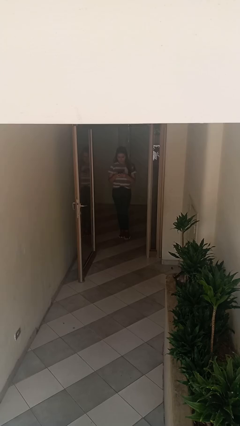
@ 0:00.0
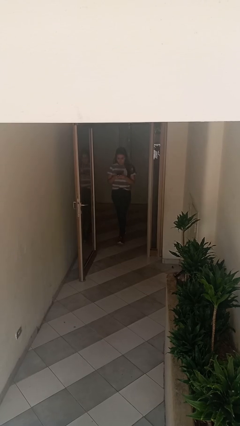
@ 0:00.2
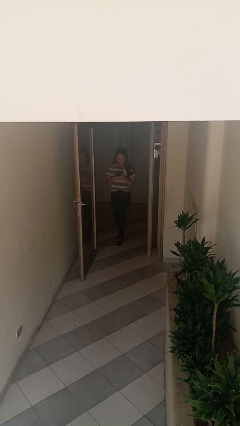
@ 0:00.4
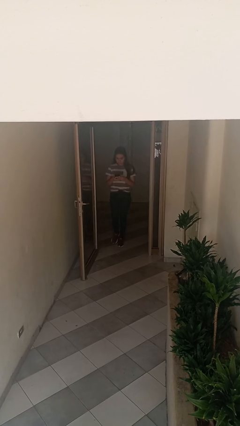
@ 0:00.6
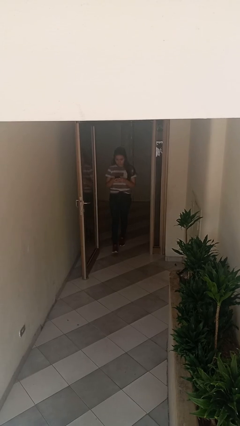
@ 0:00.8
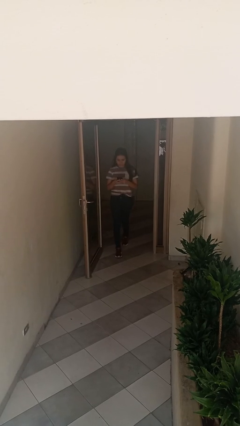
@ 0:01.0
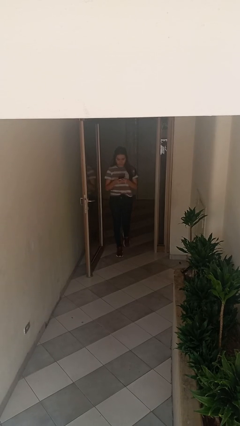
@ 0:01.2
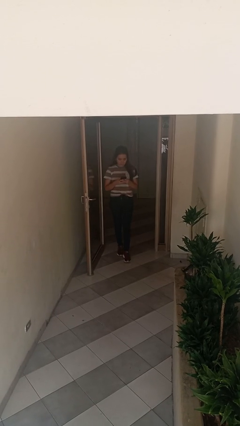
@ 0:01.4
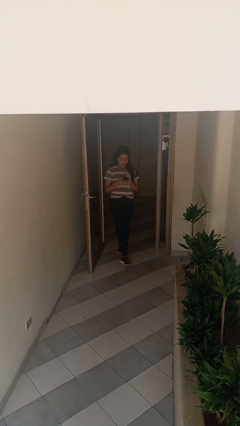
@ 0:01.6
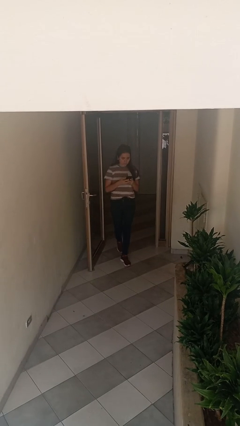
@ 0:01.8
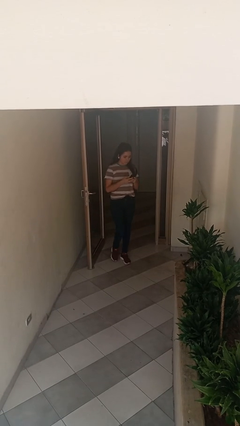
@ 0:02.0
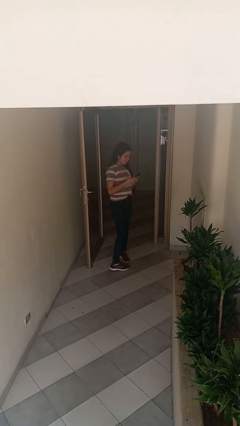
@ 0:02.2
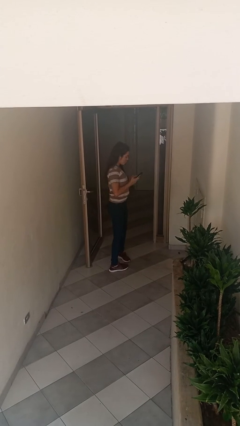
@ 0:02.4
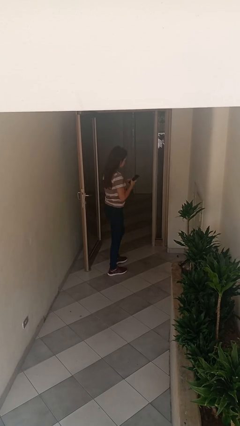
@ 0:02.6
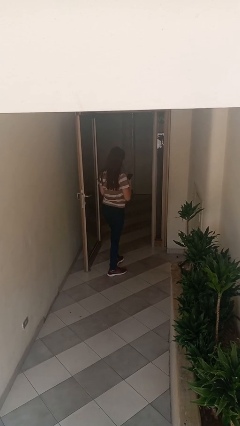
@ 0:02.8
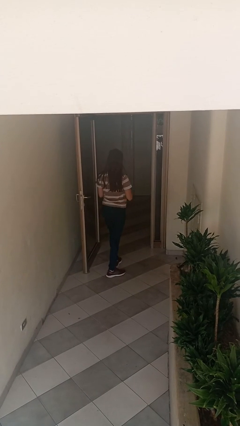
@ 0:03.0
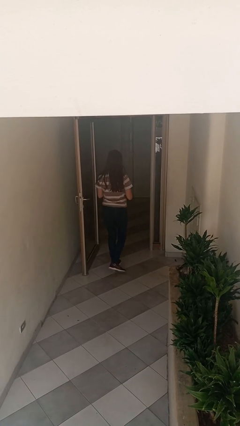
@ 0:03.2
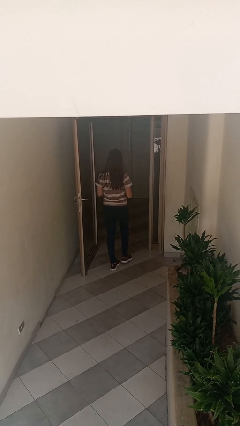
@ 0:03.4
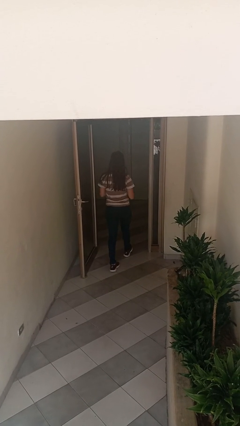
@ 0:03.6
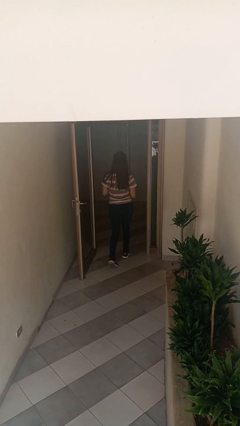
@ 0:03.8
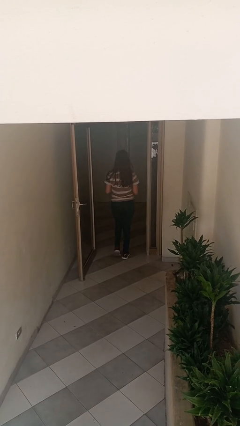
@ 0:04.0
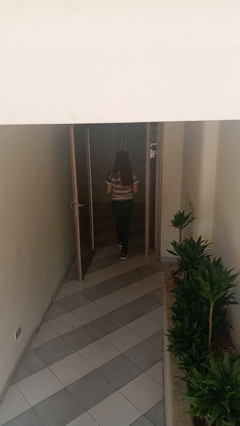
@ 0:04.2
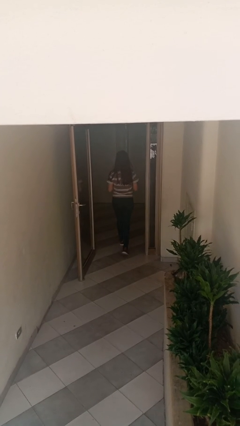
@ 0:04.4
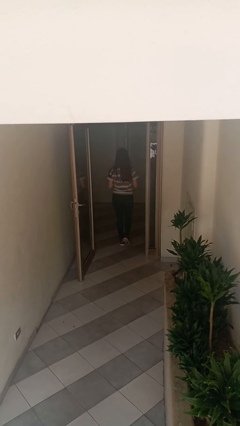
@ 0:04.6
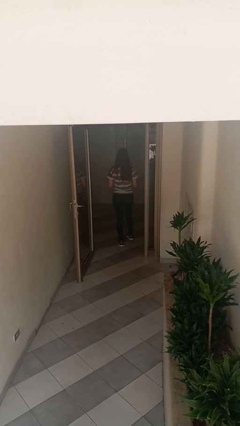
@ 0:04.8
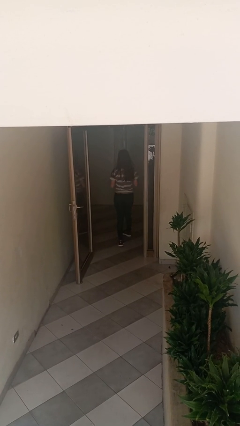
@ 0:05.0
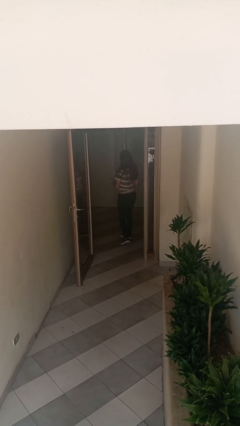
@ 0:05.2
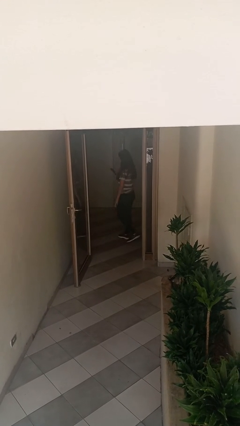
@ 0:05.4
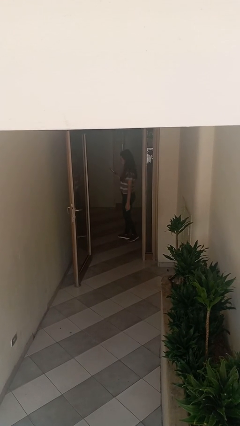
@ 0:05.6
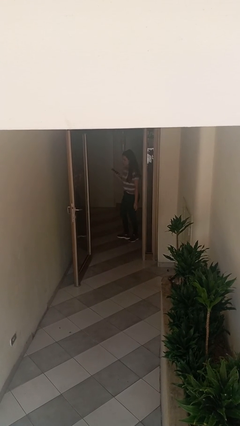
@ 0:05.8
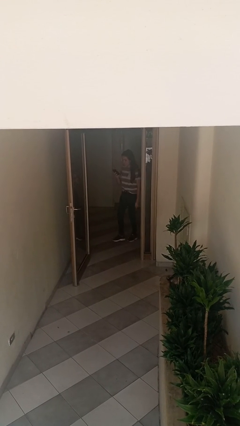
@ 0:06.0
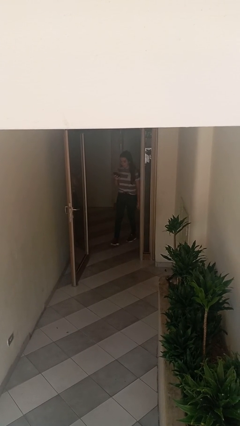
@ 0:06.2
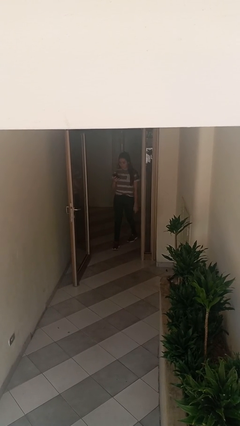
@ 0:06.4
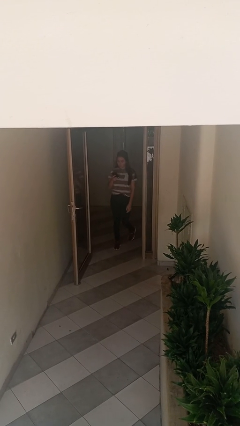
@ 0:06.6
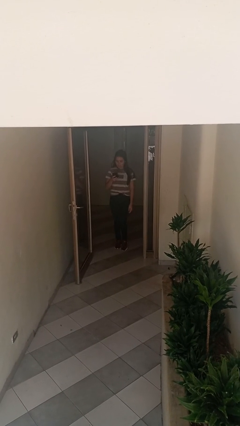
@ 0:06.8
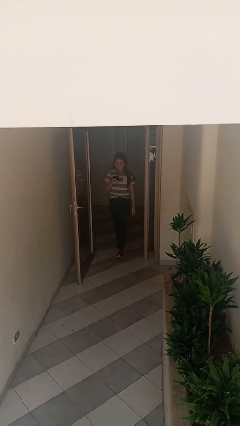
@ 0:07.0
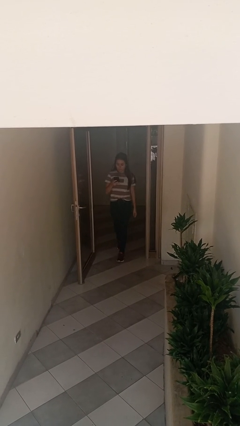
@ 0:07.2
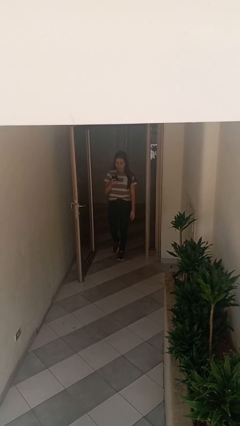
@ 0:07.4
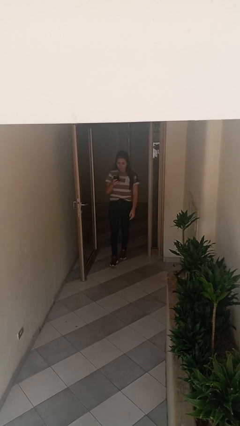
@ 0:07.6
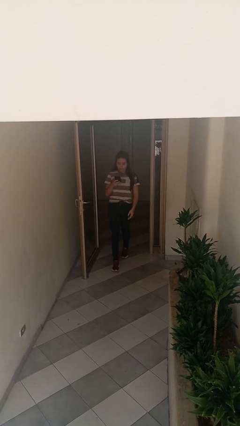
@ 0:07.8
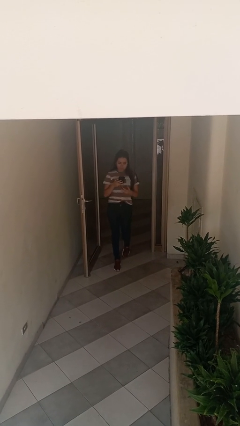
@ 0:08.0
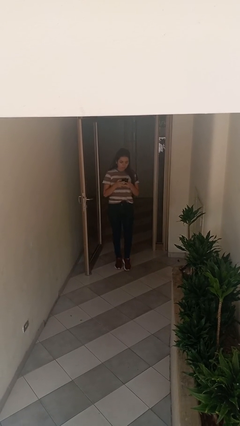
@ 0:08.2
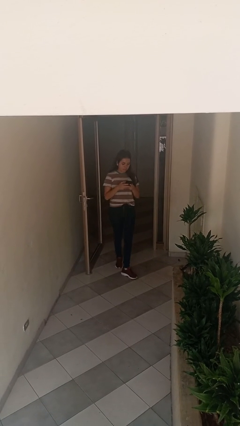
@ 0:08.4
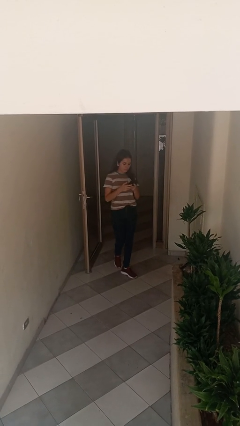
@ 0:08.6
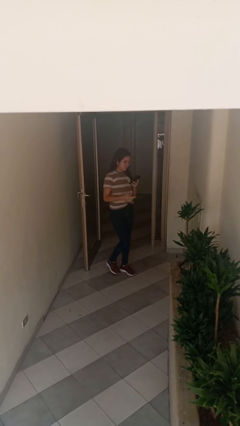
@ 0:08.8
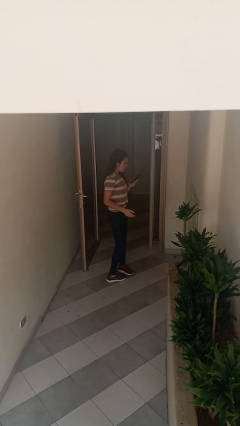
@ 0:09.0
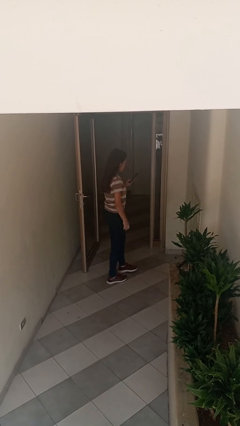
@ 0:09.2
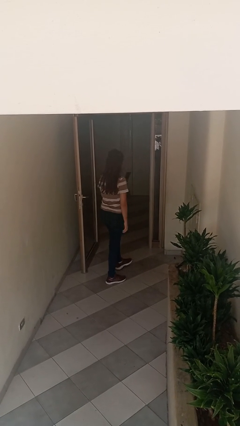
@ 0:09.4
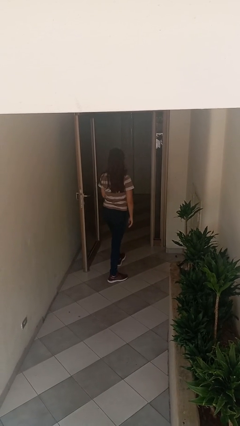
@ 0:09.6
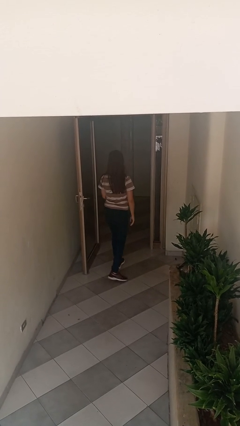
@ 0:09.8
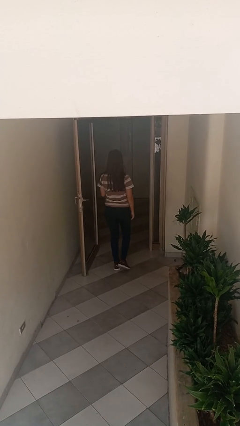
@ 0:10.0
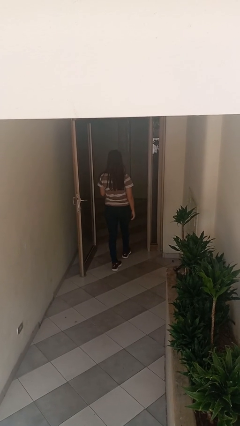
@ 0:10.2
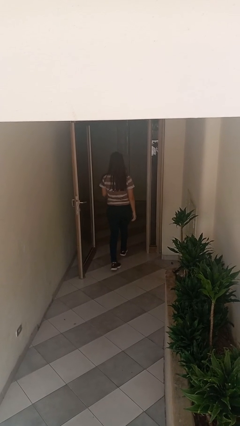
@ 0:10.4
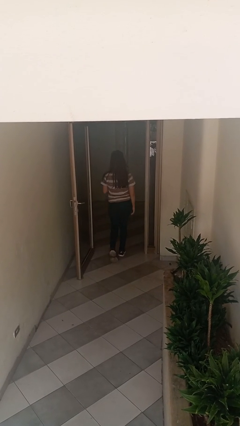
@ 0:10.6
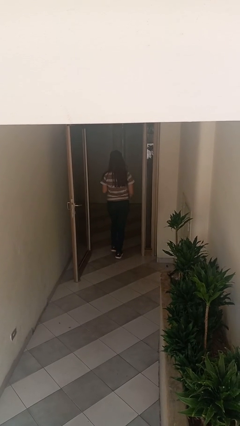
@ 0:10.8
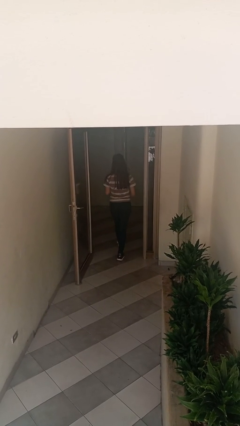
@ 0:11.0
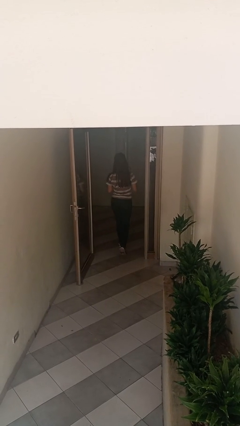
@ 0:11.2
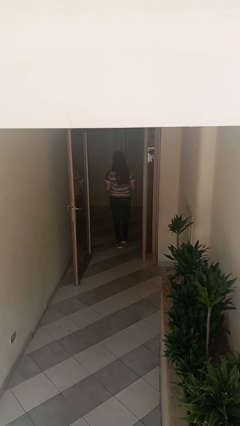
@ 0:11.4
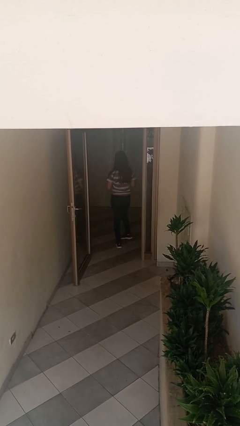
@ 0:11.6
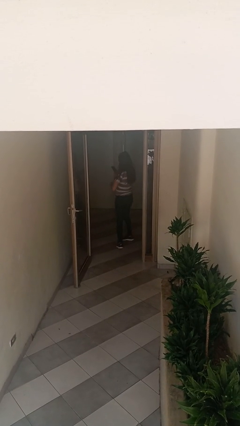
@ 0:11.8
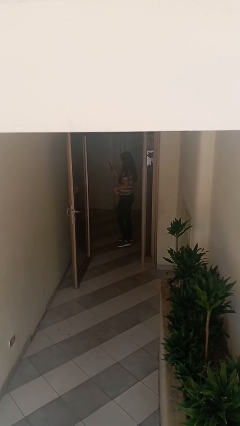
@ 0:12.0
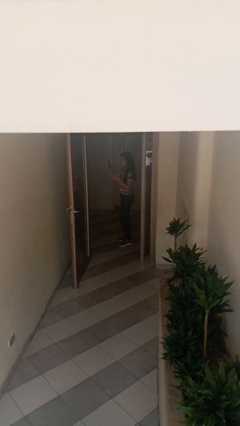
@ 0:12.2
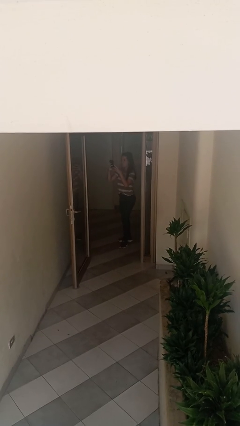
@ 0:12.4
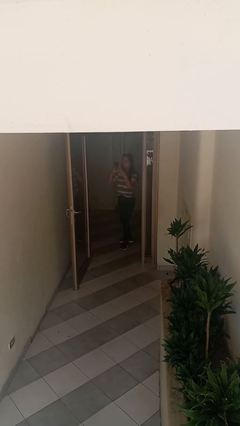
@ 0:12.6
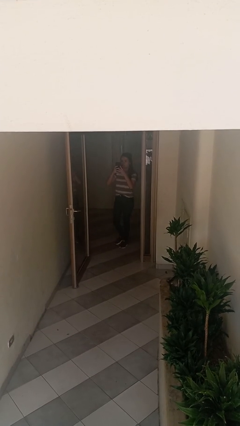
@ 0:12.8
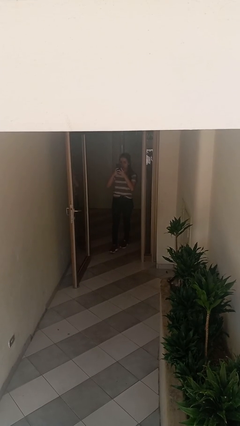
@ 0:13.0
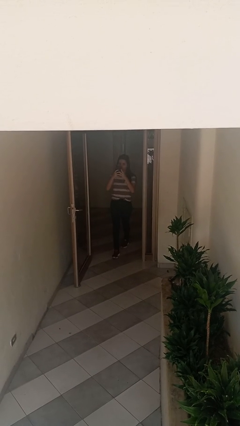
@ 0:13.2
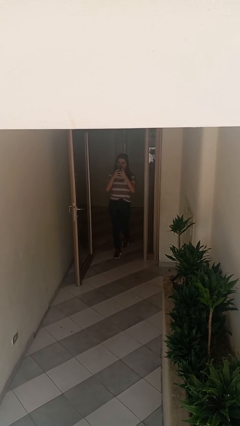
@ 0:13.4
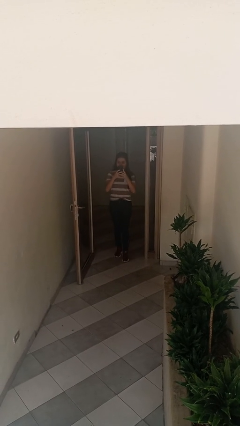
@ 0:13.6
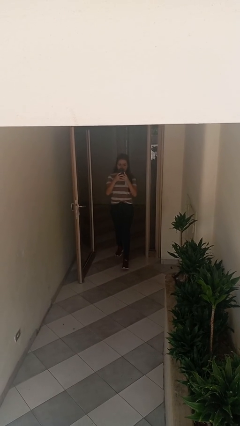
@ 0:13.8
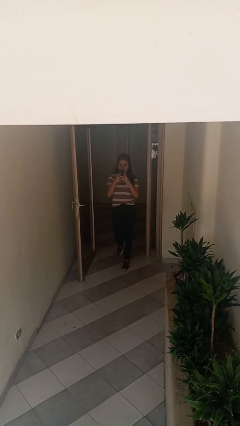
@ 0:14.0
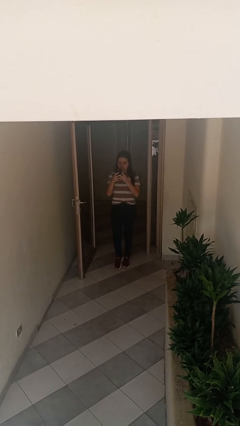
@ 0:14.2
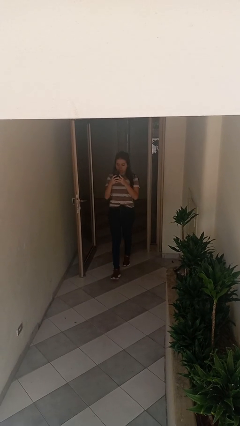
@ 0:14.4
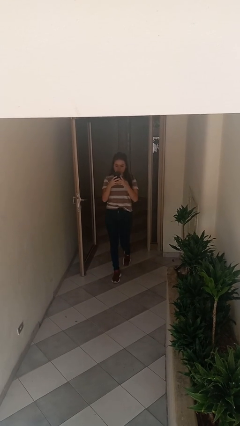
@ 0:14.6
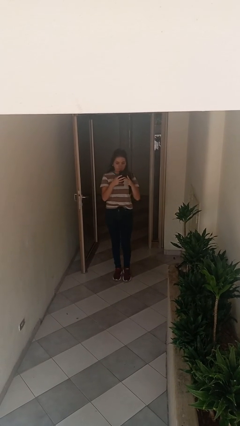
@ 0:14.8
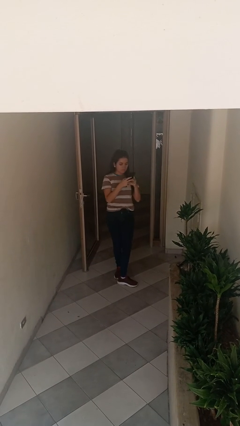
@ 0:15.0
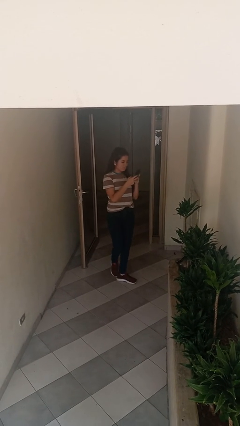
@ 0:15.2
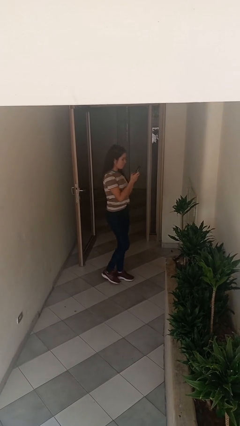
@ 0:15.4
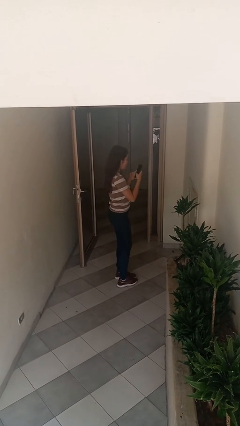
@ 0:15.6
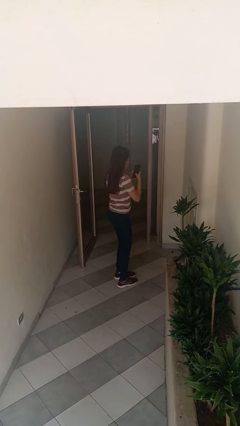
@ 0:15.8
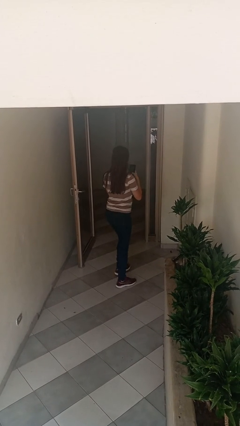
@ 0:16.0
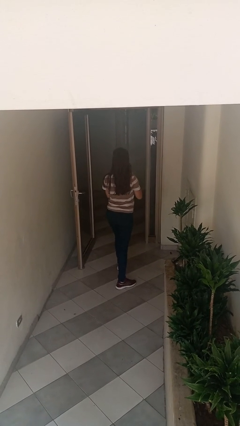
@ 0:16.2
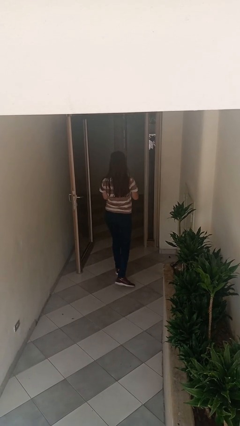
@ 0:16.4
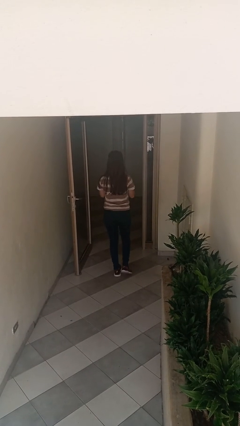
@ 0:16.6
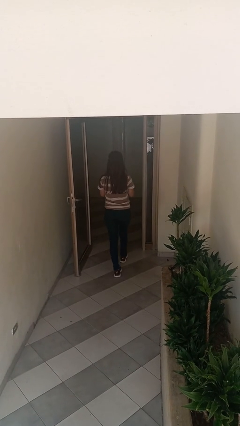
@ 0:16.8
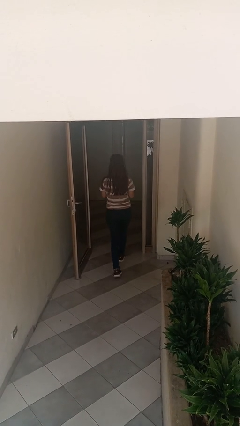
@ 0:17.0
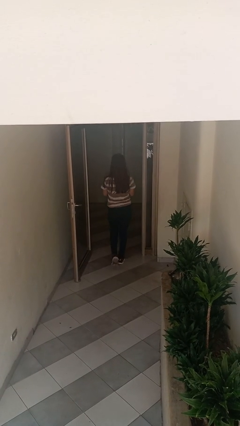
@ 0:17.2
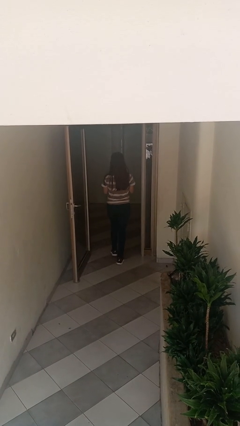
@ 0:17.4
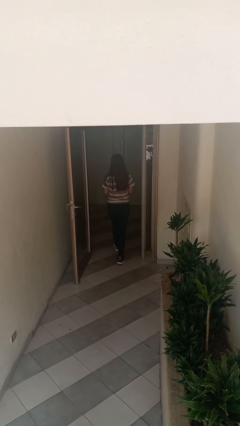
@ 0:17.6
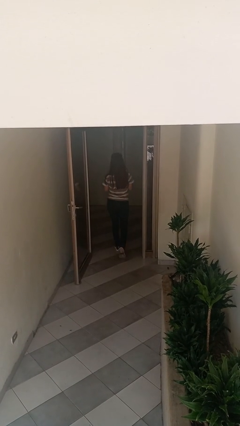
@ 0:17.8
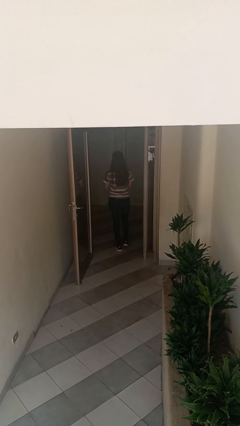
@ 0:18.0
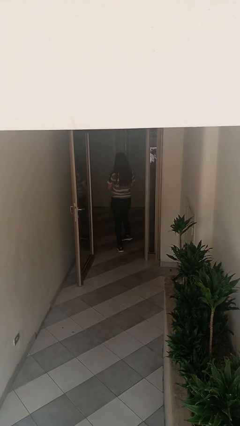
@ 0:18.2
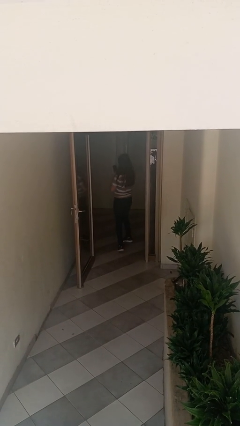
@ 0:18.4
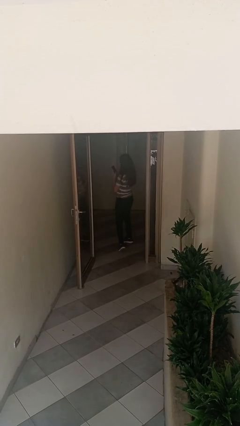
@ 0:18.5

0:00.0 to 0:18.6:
person texts on phone
